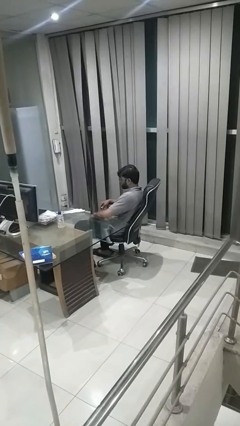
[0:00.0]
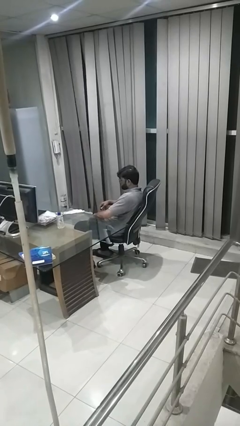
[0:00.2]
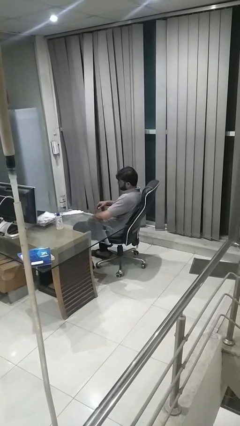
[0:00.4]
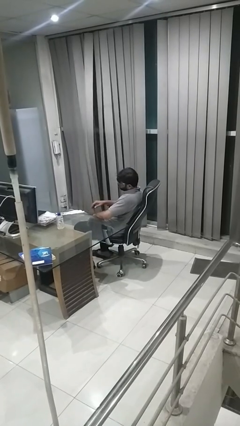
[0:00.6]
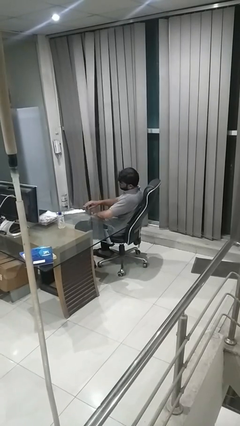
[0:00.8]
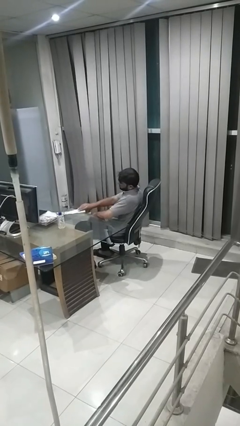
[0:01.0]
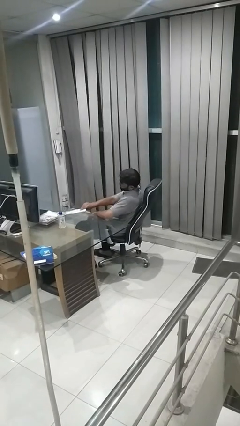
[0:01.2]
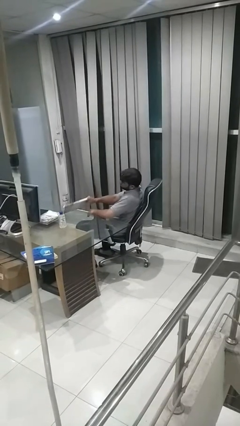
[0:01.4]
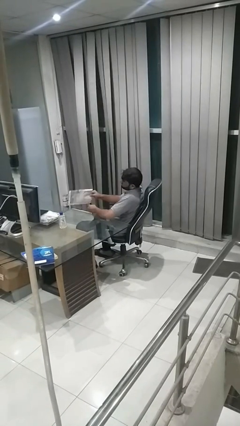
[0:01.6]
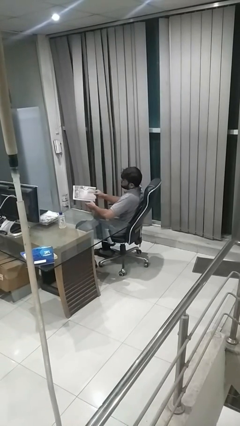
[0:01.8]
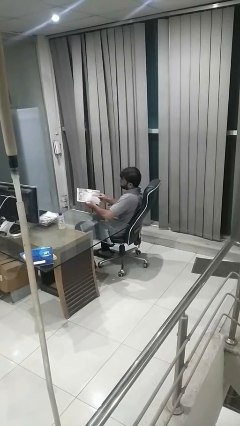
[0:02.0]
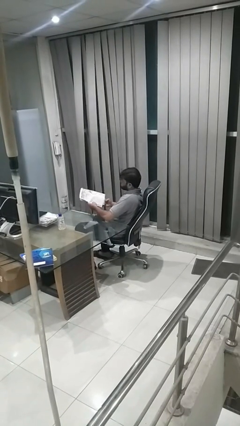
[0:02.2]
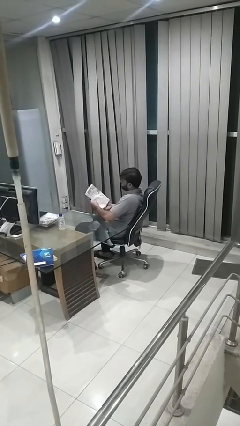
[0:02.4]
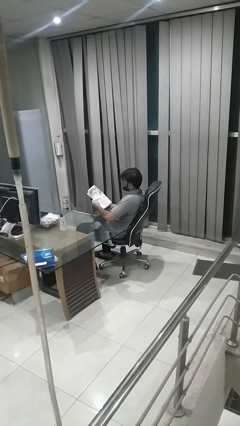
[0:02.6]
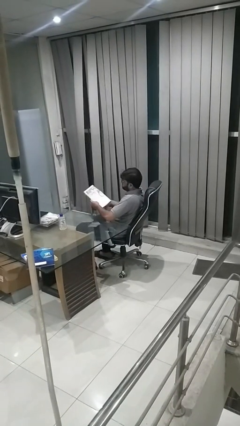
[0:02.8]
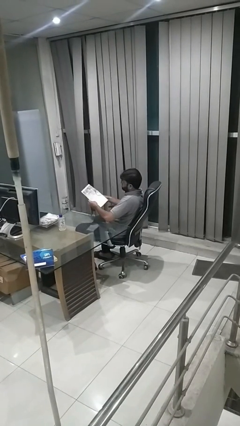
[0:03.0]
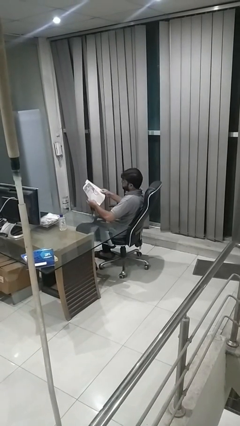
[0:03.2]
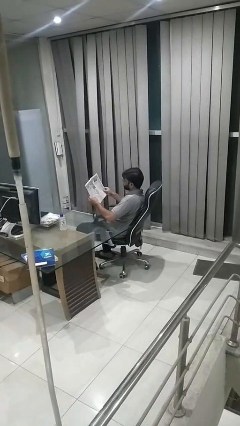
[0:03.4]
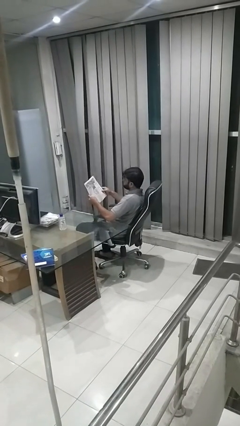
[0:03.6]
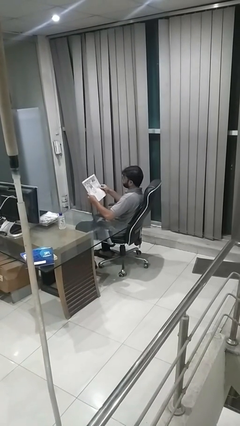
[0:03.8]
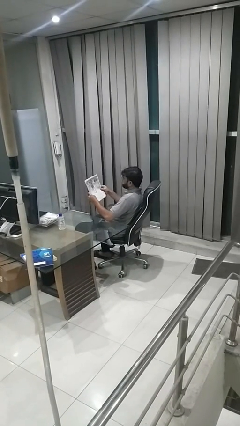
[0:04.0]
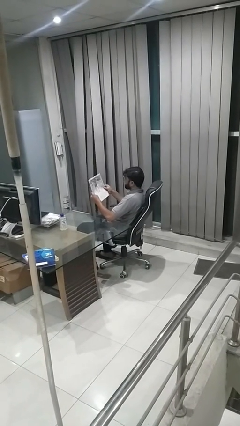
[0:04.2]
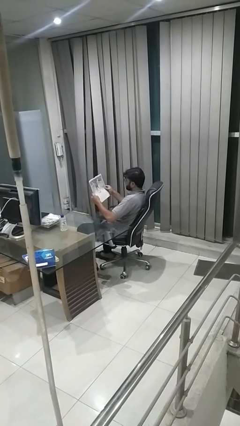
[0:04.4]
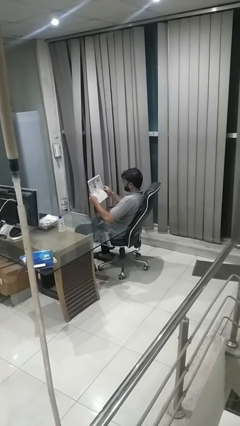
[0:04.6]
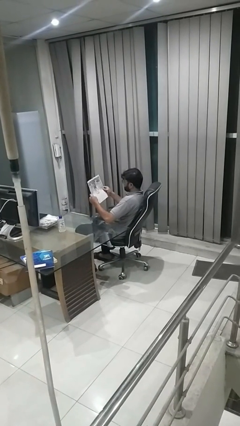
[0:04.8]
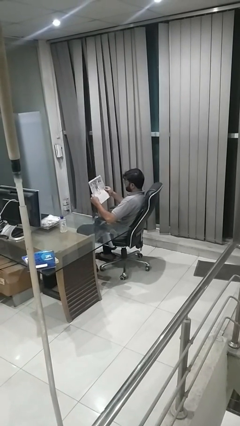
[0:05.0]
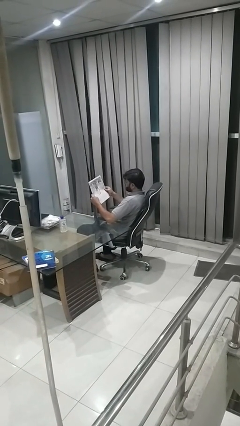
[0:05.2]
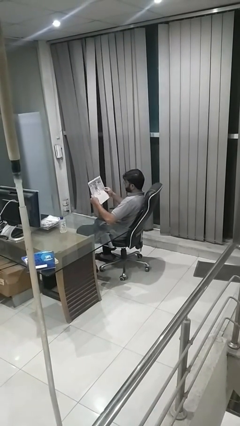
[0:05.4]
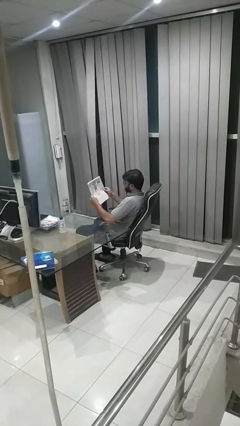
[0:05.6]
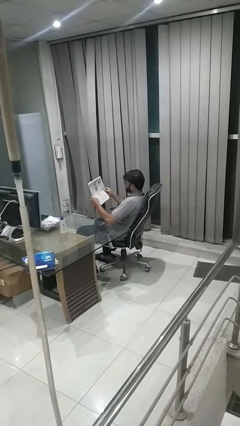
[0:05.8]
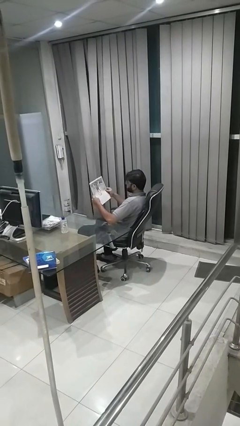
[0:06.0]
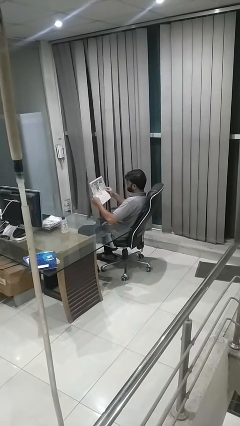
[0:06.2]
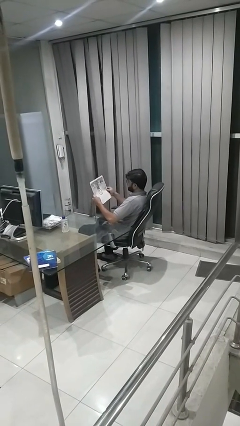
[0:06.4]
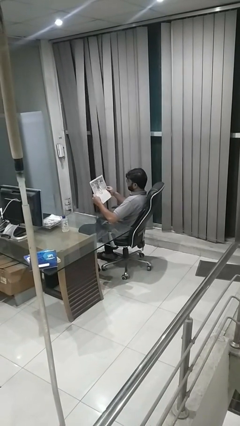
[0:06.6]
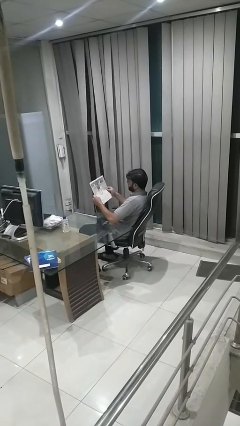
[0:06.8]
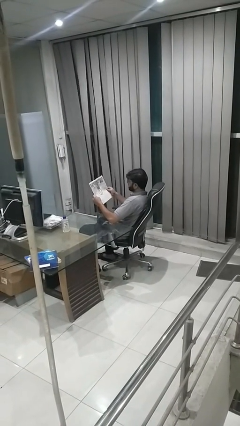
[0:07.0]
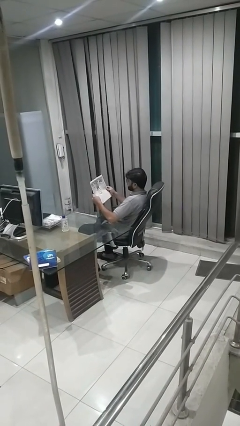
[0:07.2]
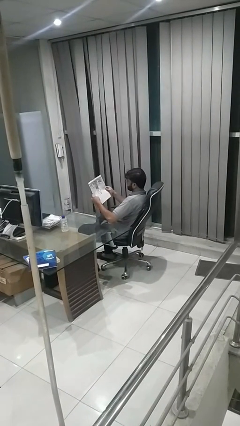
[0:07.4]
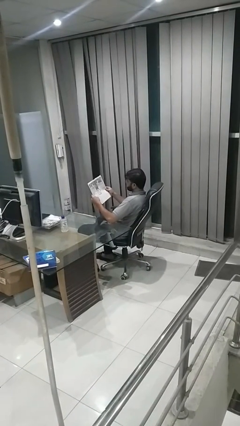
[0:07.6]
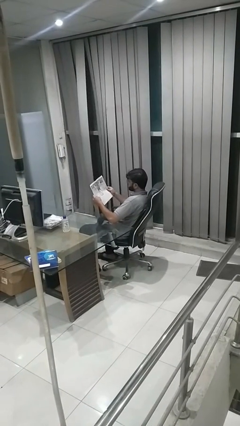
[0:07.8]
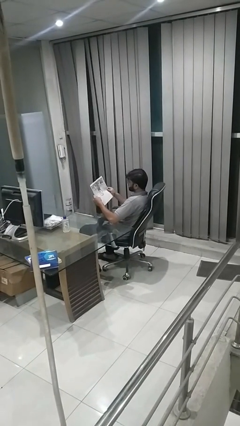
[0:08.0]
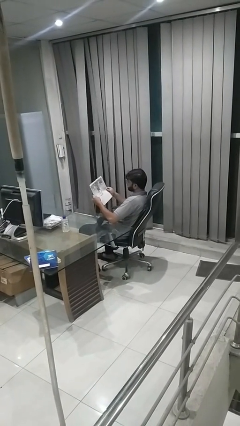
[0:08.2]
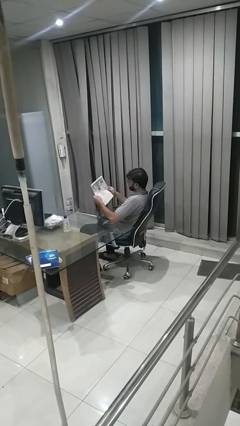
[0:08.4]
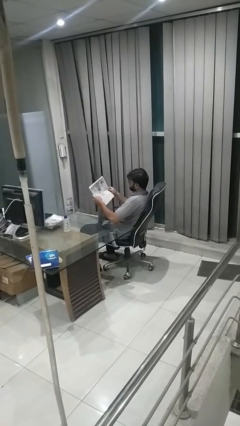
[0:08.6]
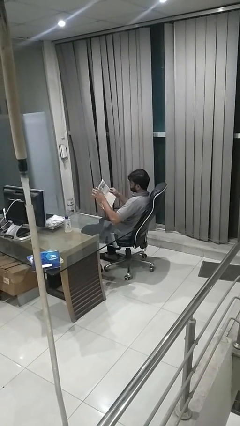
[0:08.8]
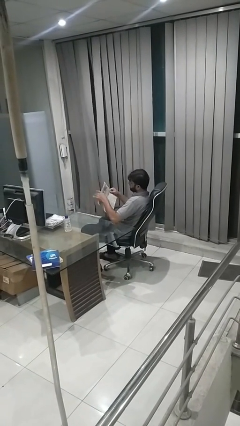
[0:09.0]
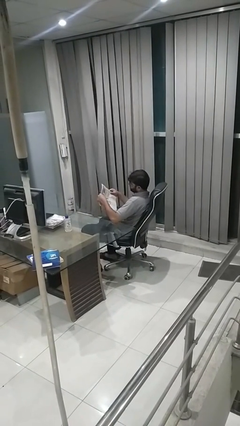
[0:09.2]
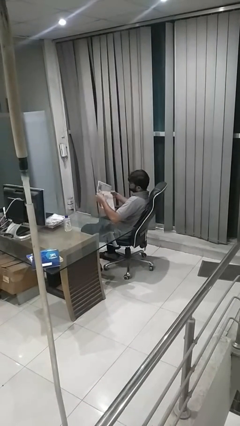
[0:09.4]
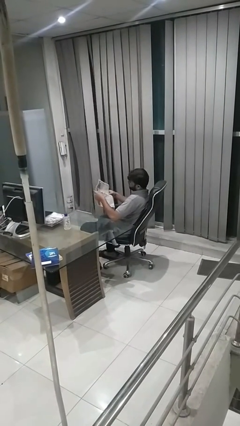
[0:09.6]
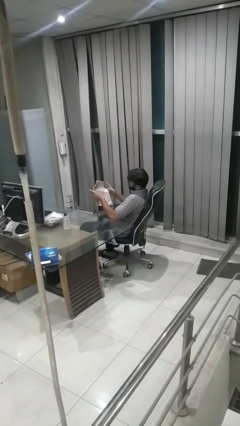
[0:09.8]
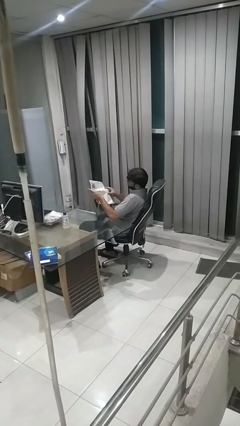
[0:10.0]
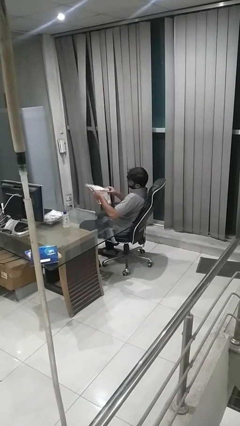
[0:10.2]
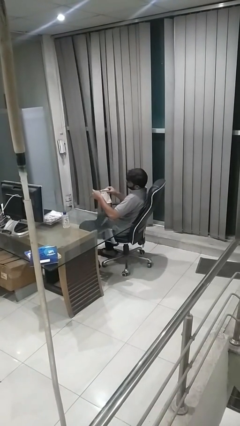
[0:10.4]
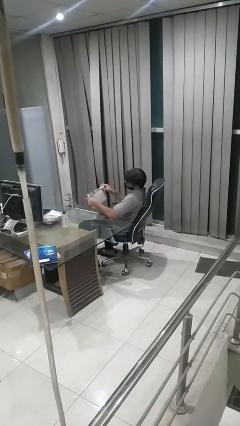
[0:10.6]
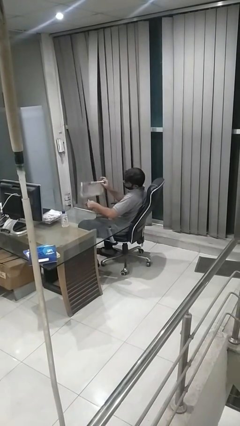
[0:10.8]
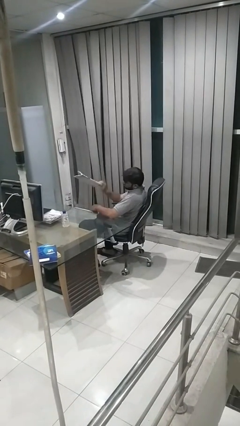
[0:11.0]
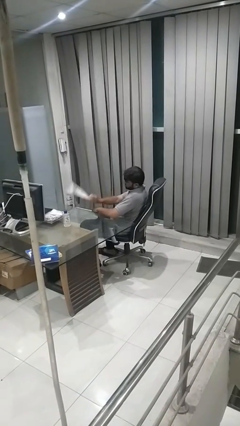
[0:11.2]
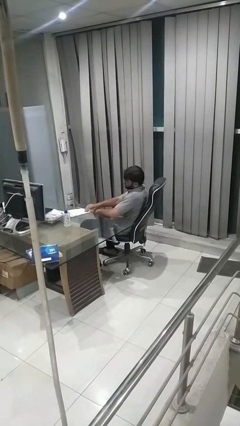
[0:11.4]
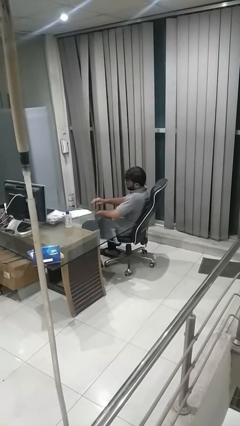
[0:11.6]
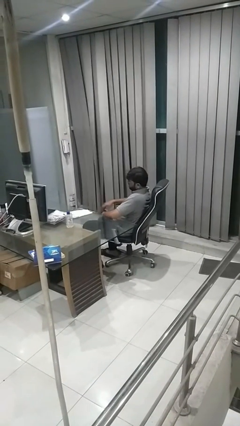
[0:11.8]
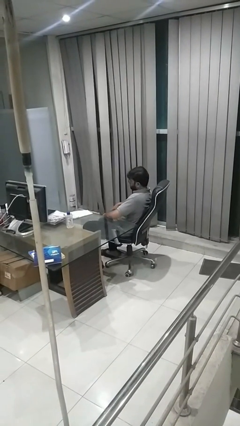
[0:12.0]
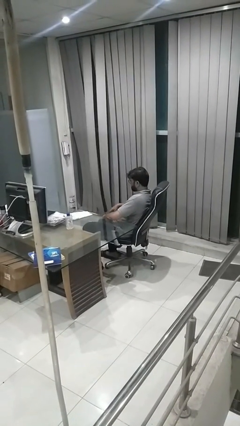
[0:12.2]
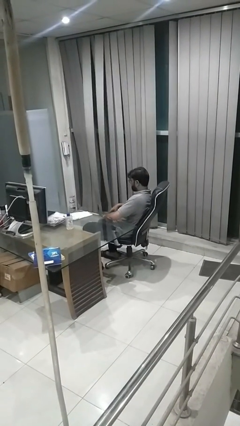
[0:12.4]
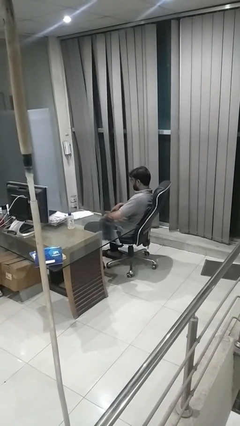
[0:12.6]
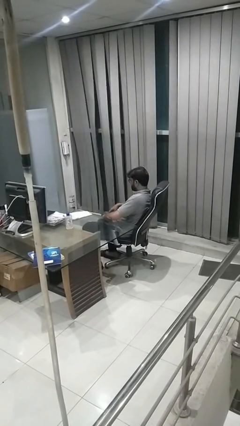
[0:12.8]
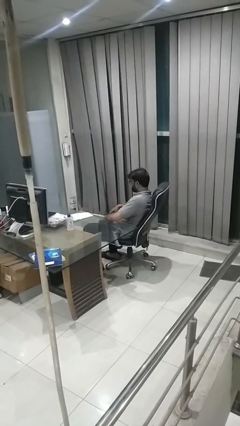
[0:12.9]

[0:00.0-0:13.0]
person reads newspaper

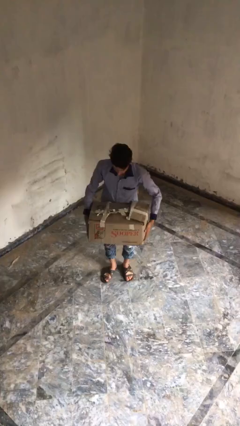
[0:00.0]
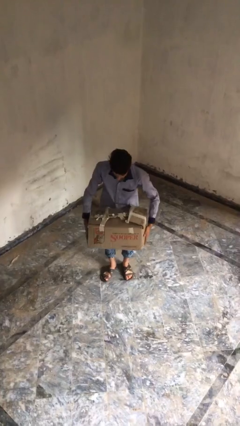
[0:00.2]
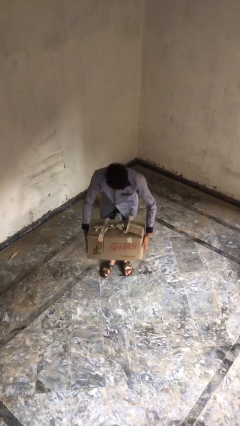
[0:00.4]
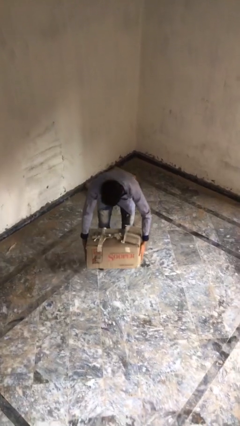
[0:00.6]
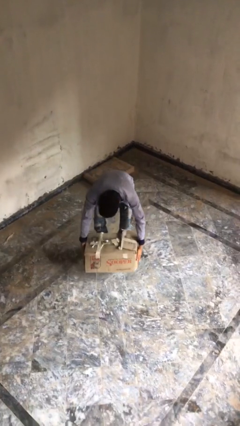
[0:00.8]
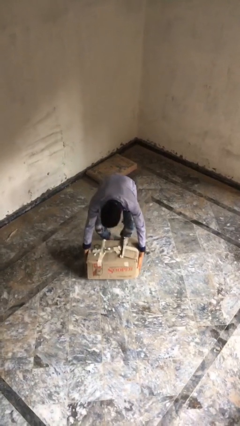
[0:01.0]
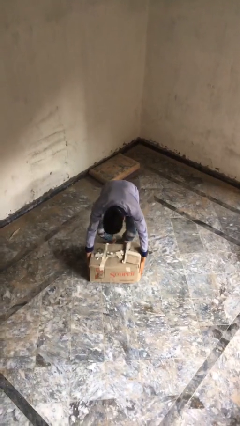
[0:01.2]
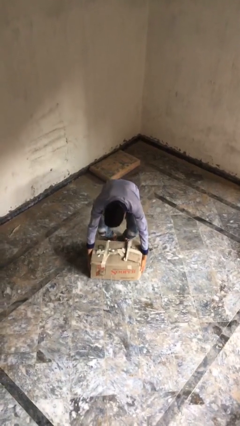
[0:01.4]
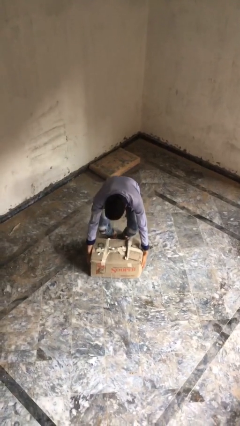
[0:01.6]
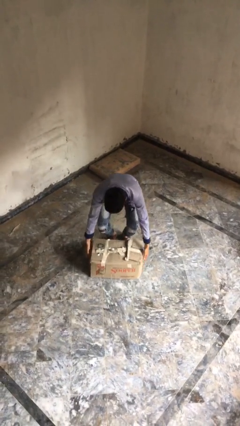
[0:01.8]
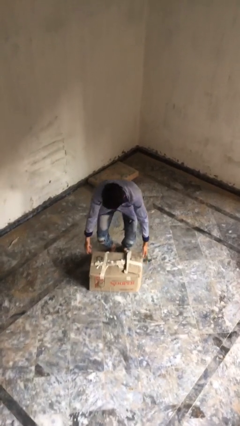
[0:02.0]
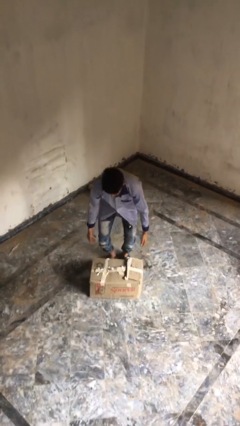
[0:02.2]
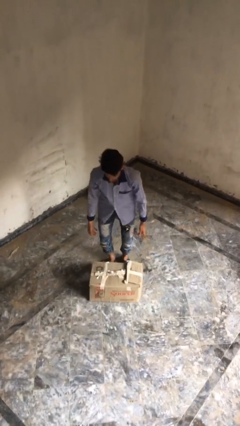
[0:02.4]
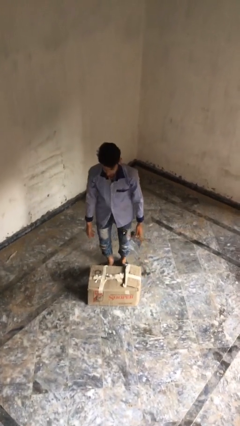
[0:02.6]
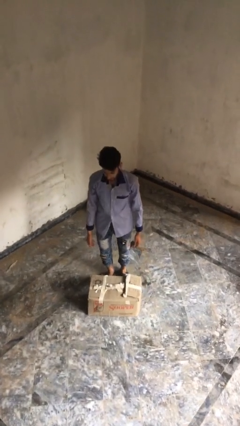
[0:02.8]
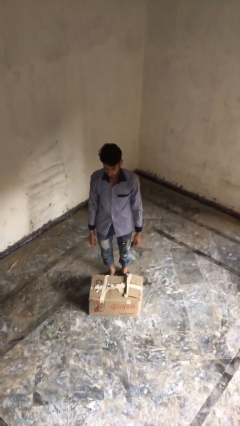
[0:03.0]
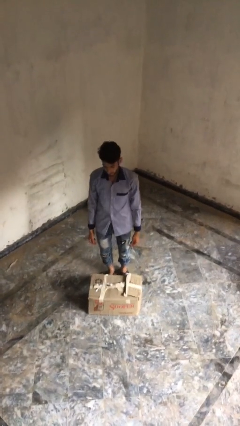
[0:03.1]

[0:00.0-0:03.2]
person puts down object on floor

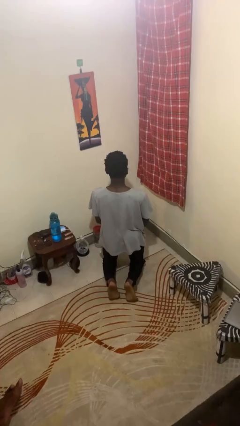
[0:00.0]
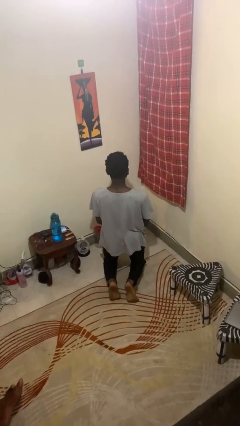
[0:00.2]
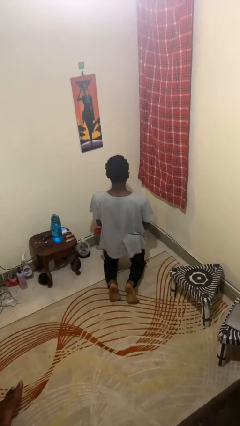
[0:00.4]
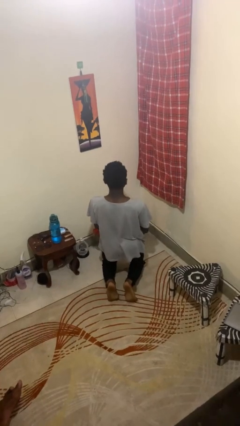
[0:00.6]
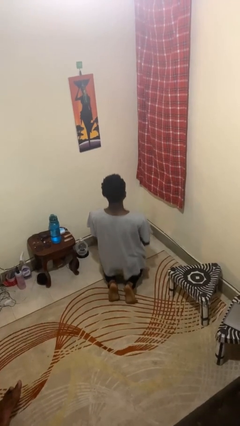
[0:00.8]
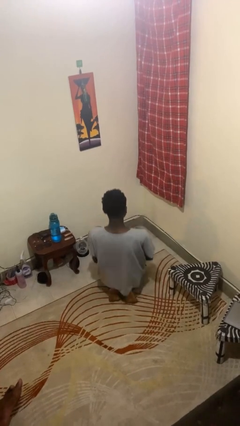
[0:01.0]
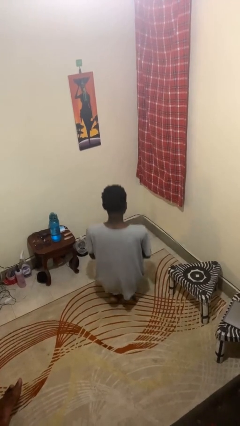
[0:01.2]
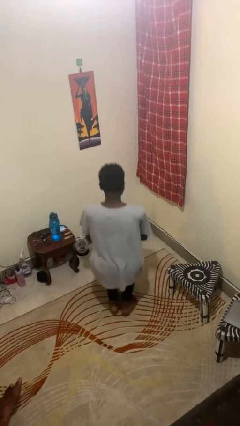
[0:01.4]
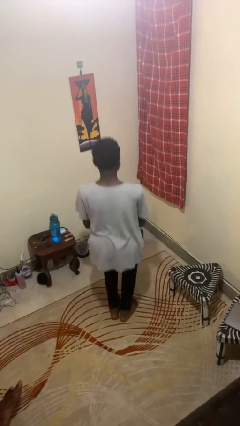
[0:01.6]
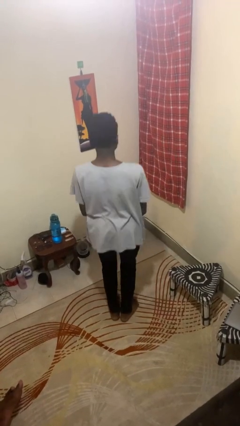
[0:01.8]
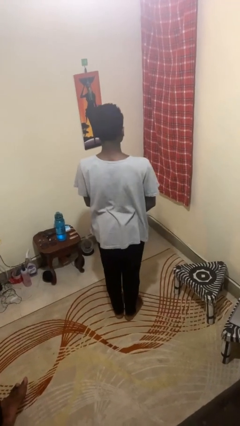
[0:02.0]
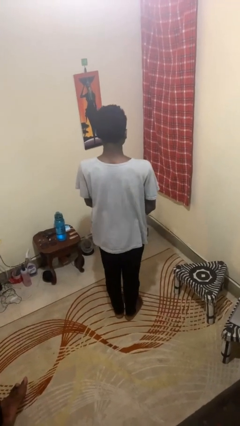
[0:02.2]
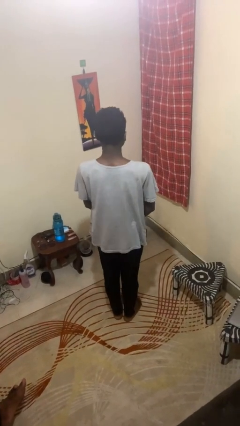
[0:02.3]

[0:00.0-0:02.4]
person stands up from floor
